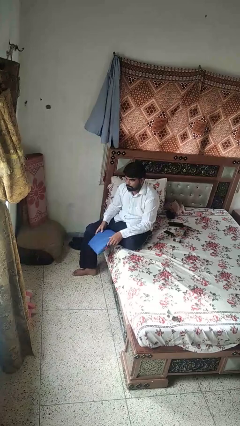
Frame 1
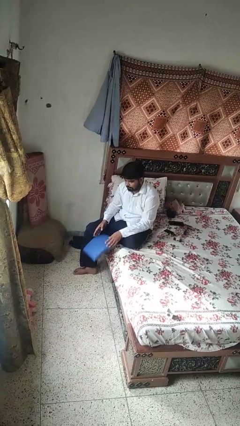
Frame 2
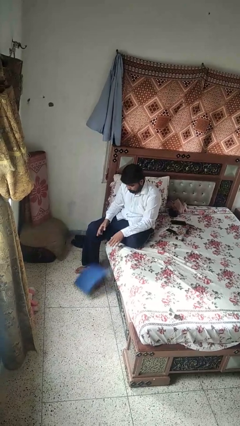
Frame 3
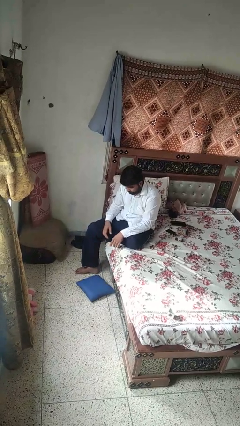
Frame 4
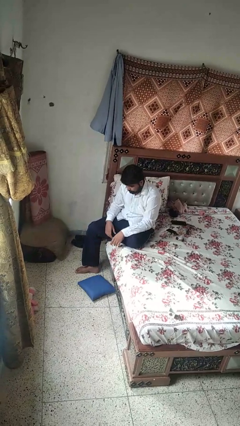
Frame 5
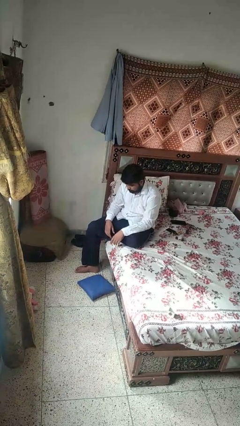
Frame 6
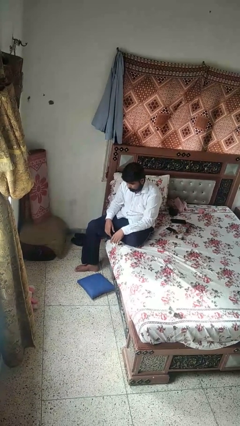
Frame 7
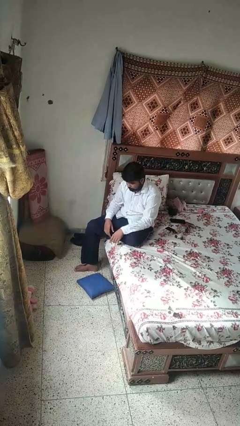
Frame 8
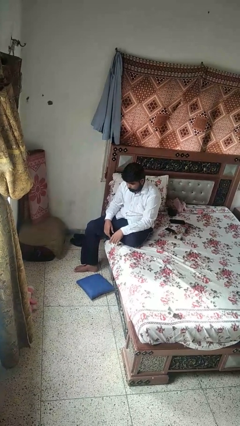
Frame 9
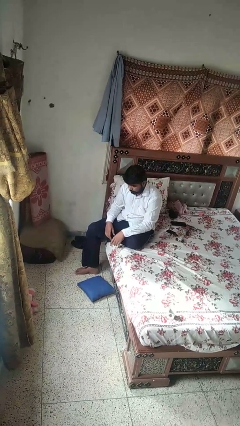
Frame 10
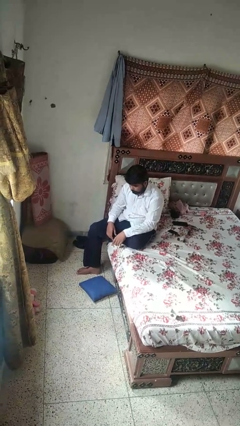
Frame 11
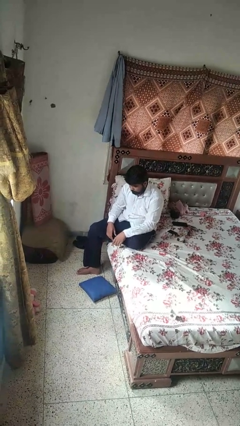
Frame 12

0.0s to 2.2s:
person drops object

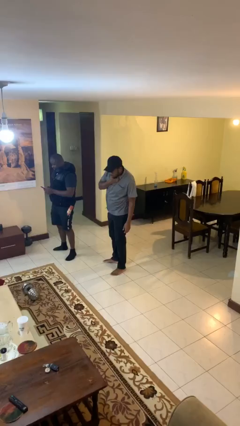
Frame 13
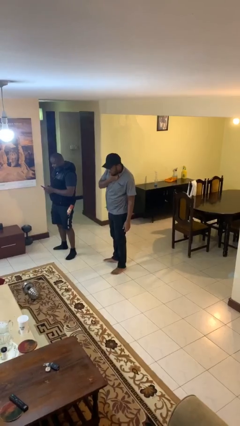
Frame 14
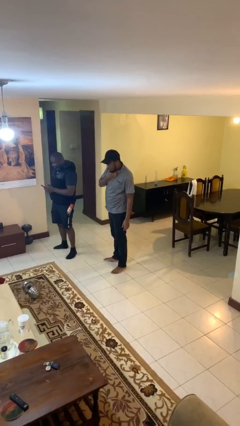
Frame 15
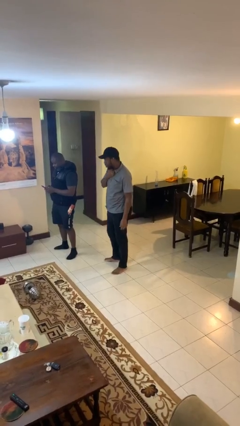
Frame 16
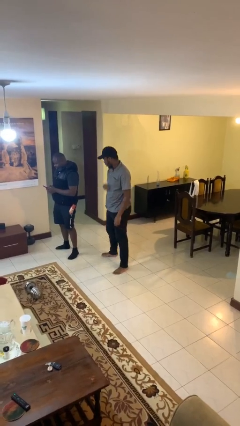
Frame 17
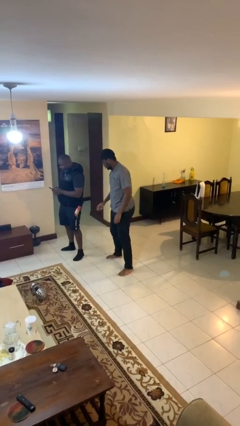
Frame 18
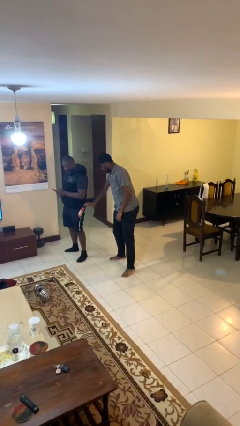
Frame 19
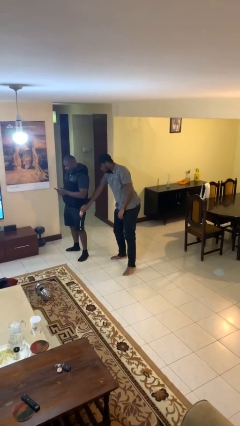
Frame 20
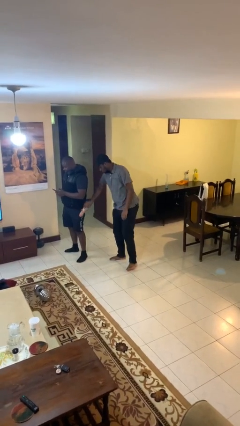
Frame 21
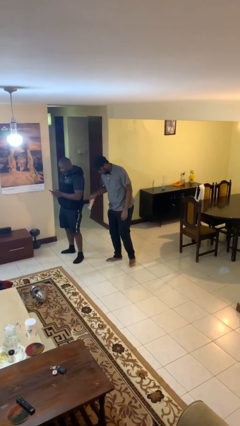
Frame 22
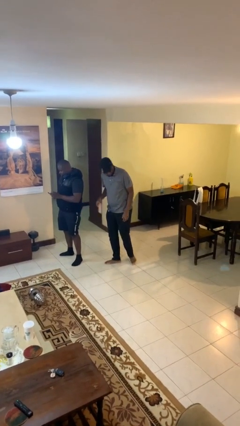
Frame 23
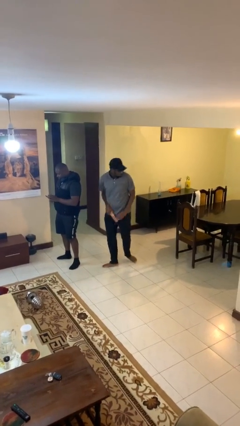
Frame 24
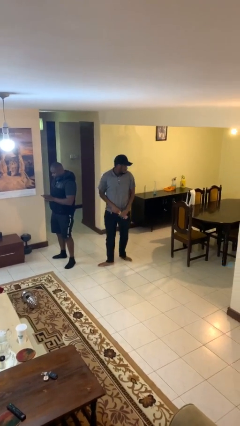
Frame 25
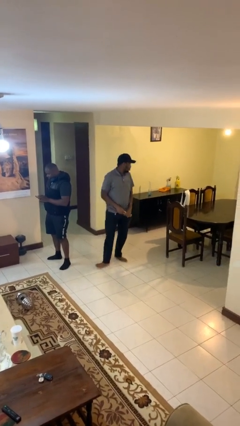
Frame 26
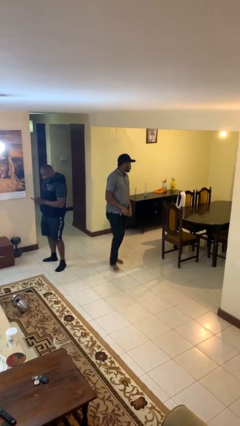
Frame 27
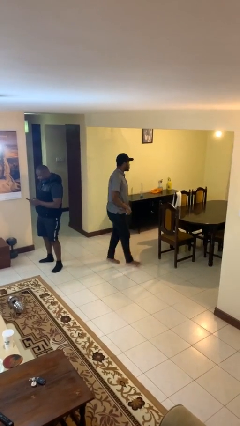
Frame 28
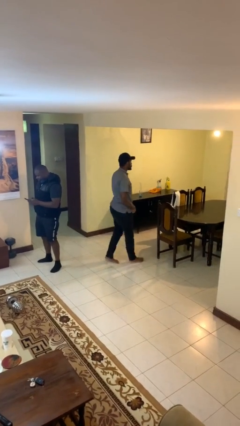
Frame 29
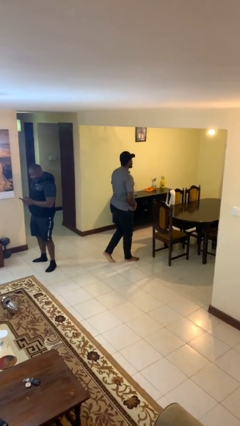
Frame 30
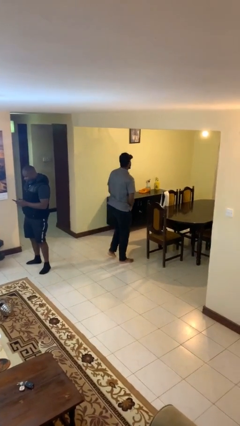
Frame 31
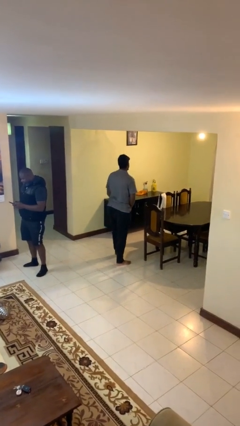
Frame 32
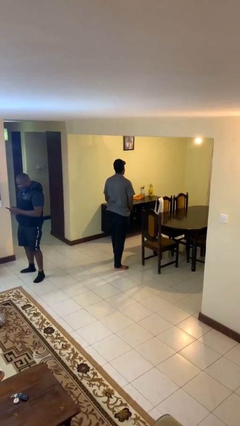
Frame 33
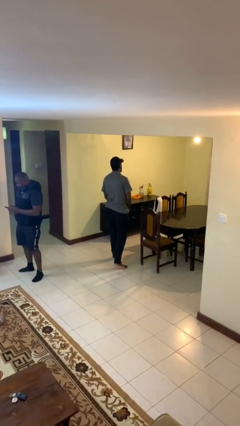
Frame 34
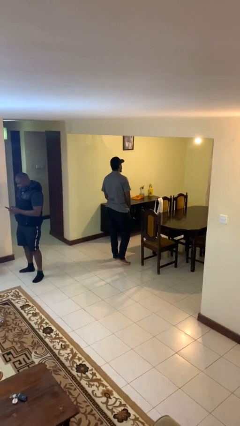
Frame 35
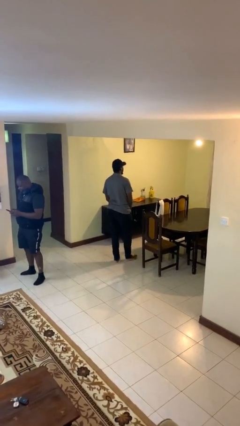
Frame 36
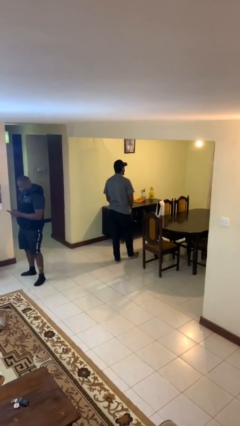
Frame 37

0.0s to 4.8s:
person steals object from person

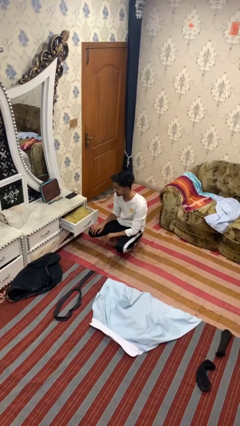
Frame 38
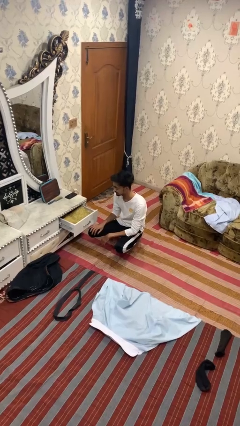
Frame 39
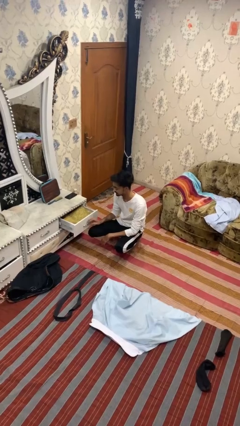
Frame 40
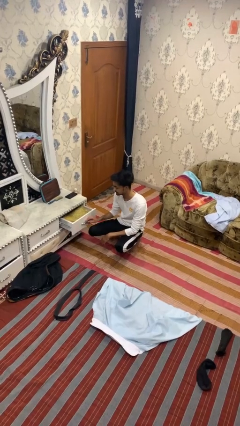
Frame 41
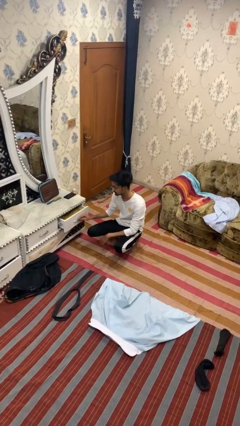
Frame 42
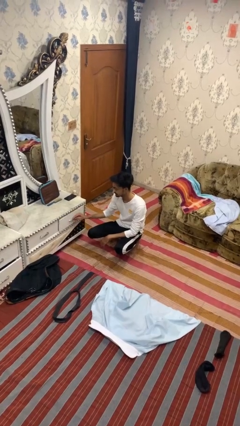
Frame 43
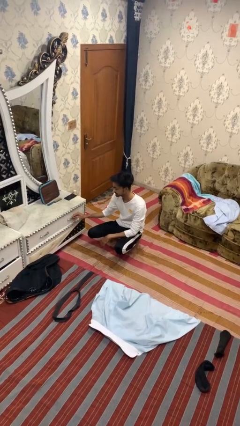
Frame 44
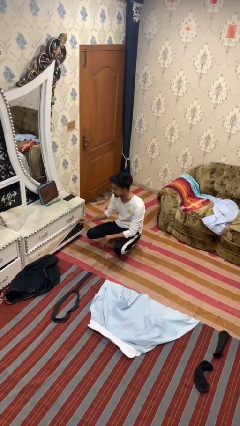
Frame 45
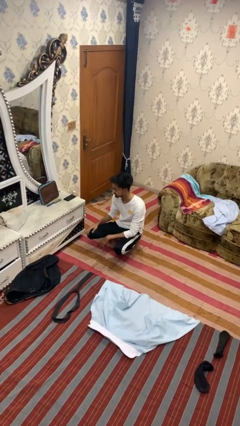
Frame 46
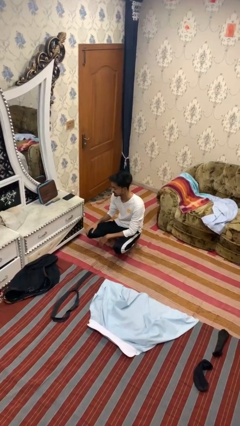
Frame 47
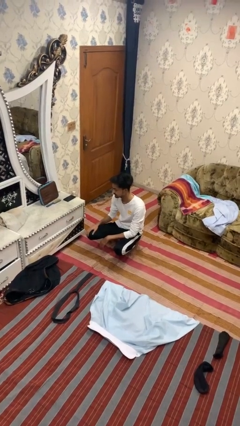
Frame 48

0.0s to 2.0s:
person closes dresser drawer

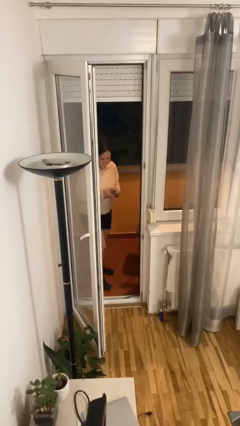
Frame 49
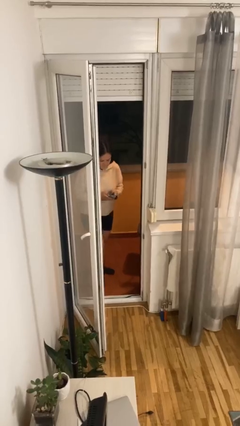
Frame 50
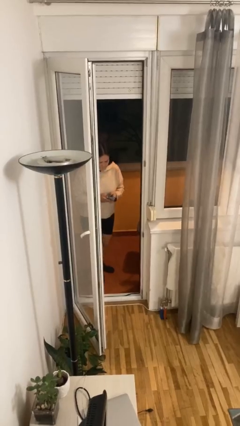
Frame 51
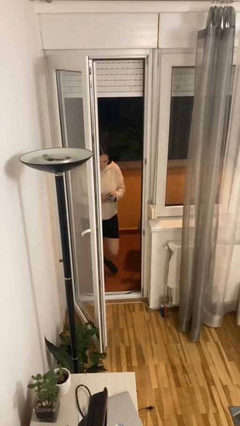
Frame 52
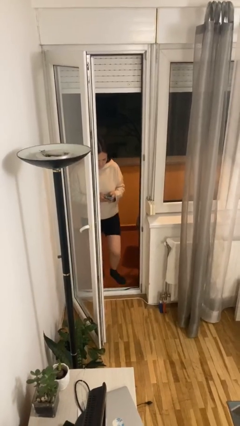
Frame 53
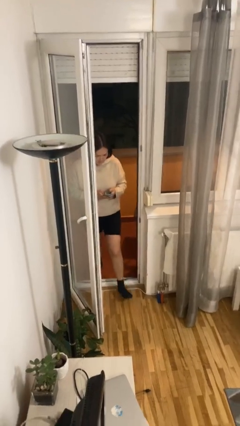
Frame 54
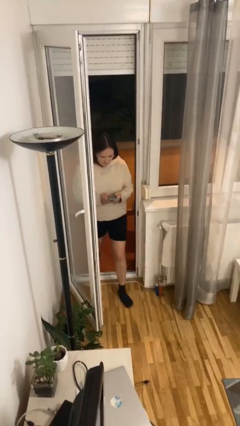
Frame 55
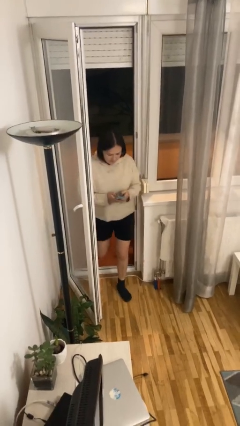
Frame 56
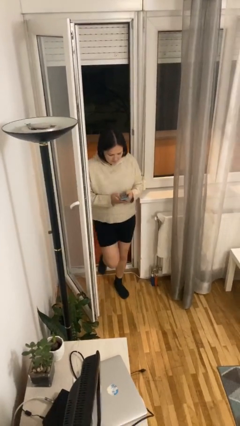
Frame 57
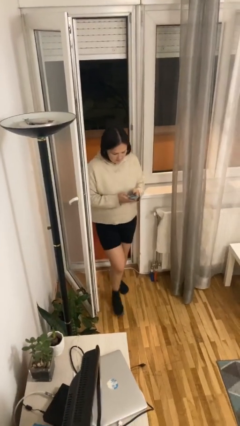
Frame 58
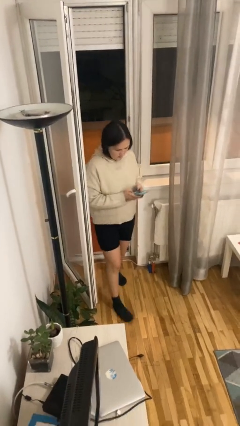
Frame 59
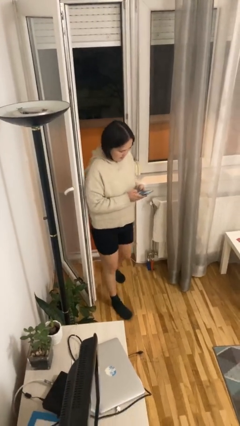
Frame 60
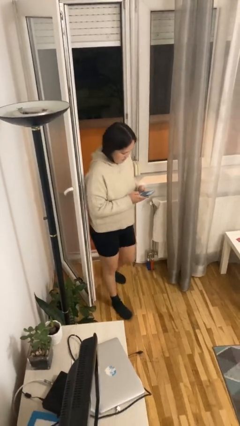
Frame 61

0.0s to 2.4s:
person enters scene through structure

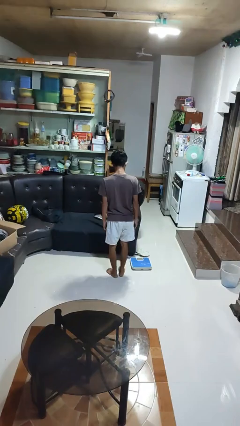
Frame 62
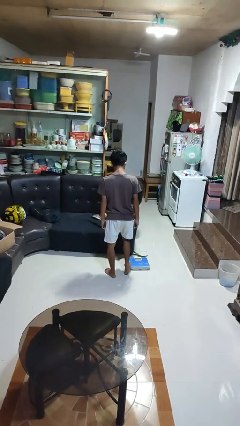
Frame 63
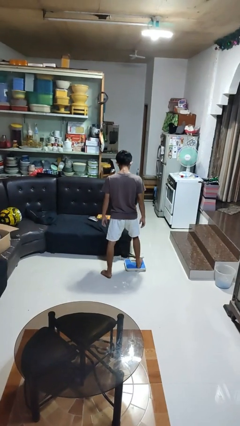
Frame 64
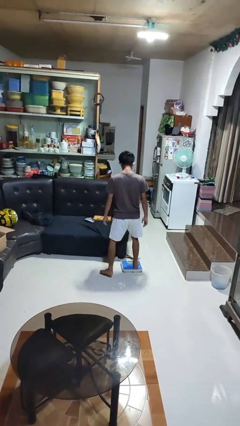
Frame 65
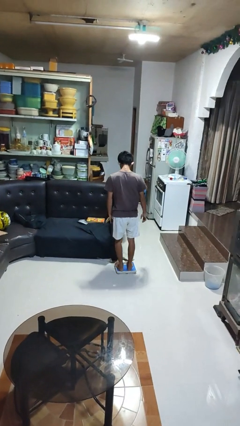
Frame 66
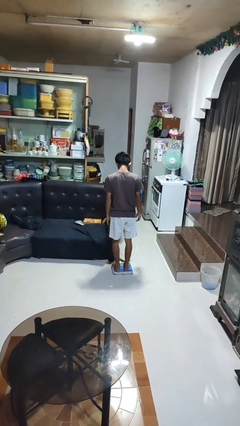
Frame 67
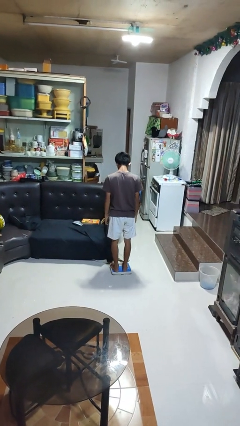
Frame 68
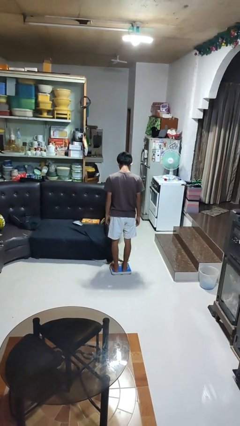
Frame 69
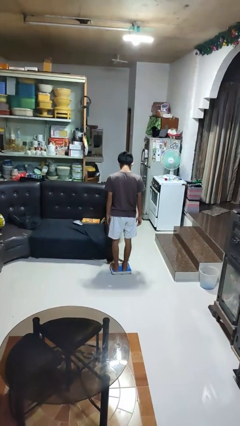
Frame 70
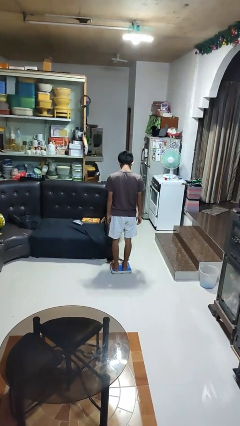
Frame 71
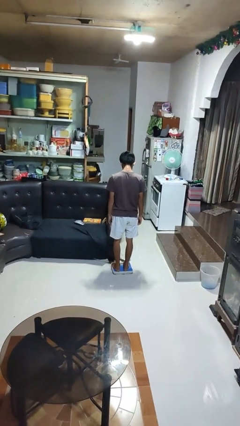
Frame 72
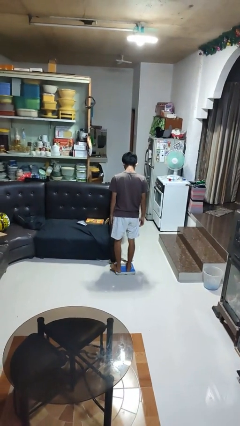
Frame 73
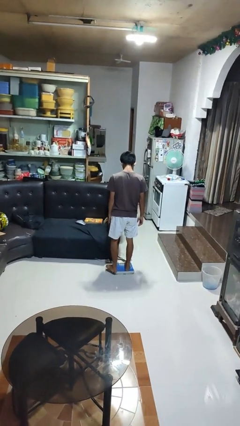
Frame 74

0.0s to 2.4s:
person uses bodyweight scale

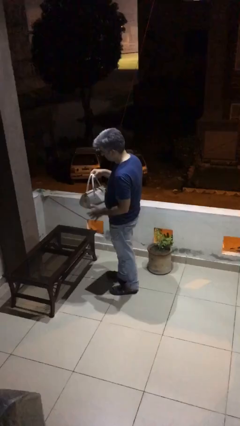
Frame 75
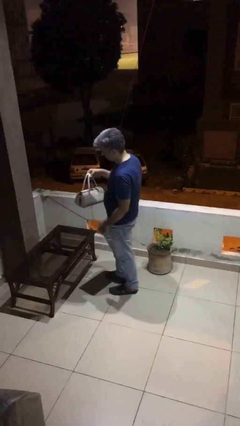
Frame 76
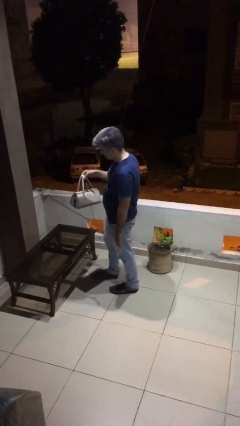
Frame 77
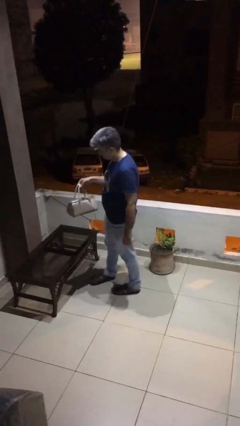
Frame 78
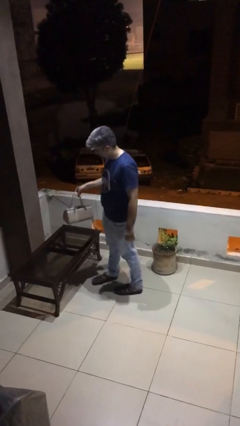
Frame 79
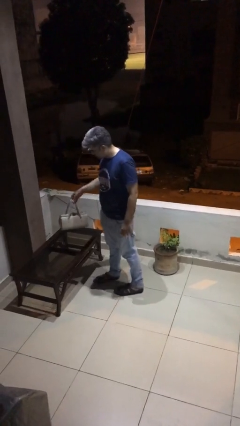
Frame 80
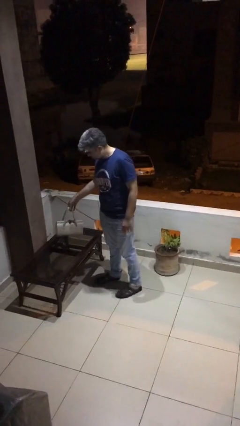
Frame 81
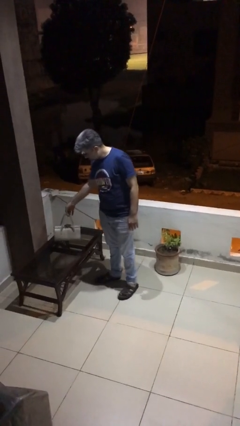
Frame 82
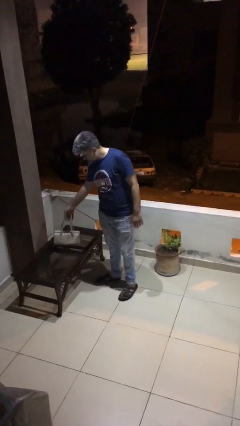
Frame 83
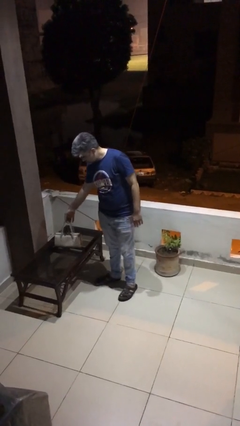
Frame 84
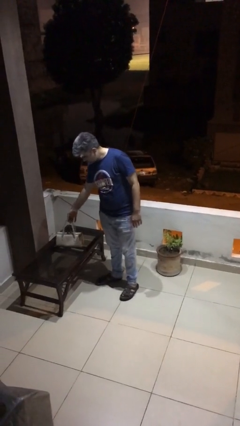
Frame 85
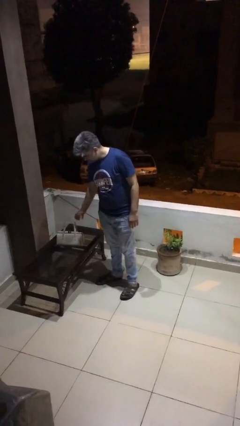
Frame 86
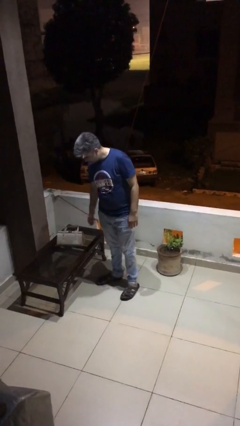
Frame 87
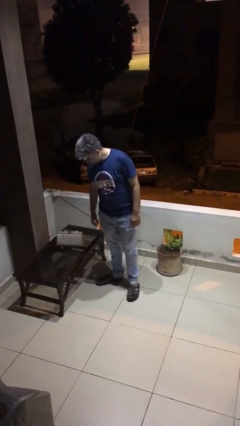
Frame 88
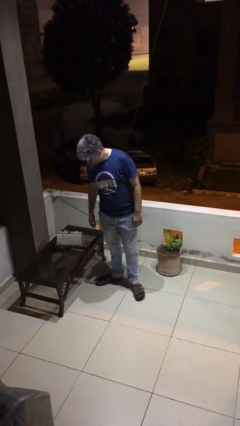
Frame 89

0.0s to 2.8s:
person puts down object on table

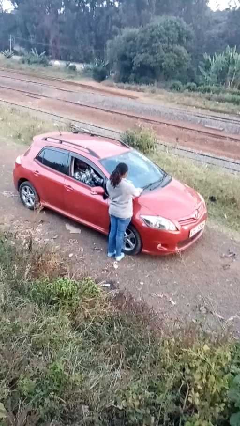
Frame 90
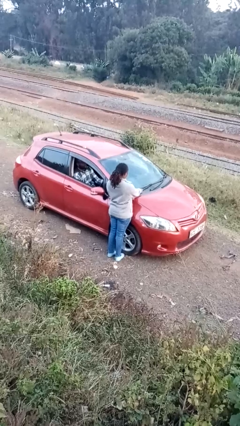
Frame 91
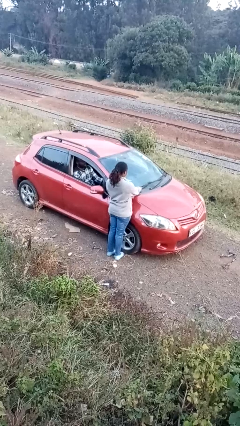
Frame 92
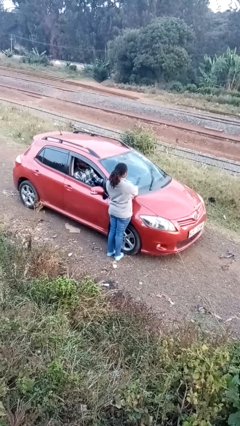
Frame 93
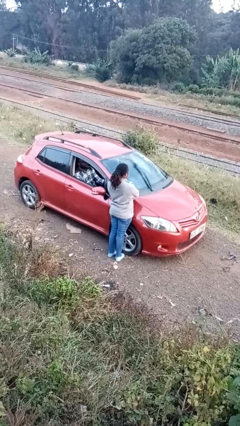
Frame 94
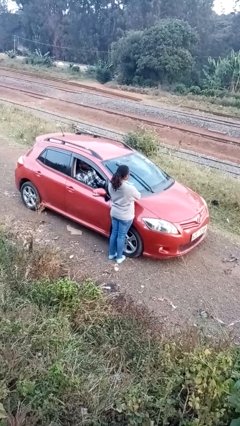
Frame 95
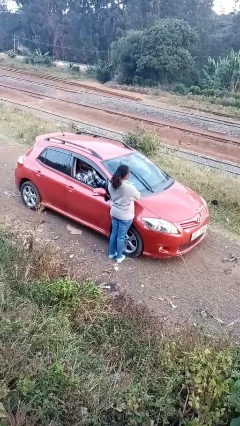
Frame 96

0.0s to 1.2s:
person flips up car wipers
